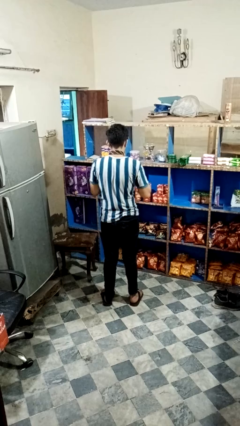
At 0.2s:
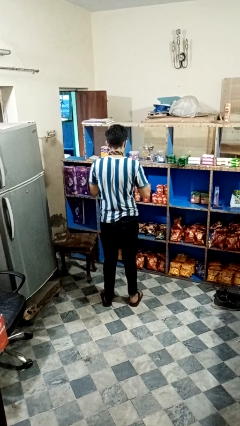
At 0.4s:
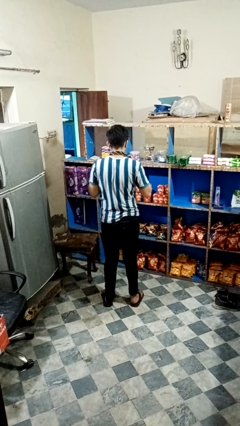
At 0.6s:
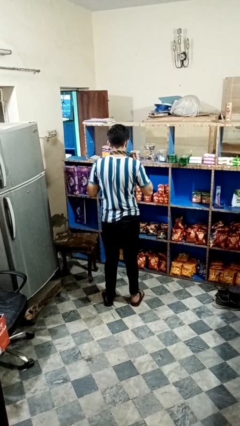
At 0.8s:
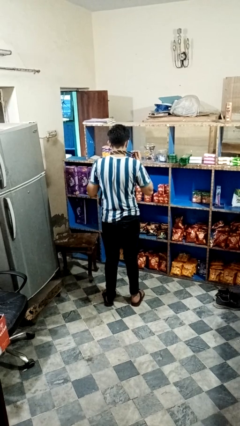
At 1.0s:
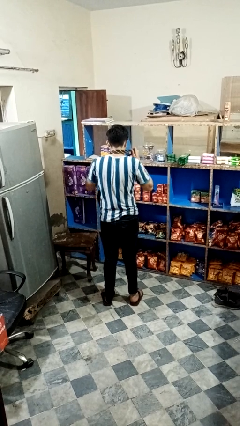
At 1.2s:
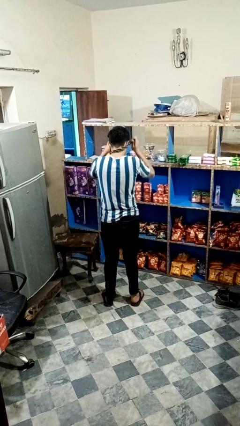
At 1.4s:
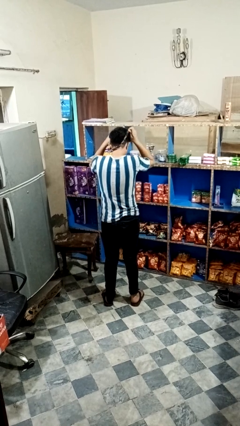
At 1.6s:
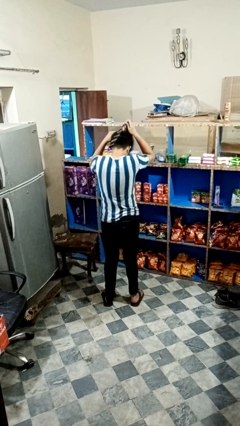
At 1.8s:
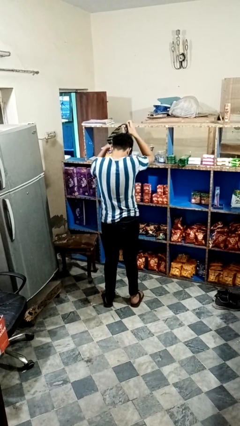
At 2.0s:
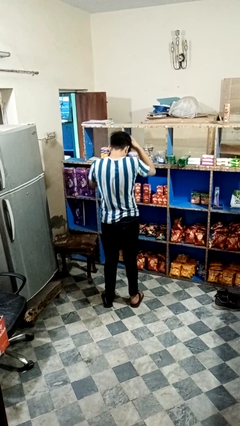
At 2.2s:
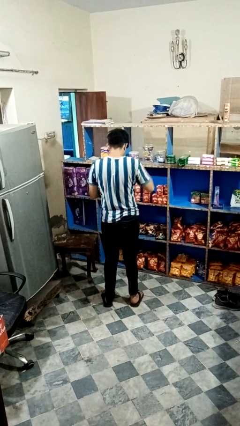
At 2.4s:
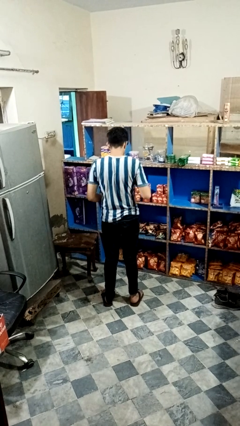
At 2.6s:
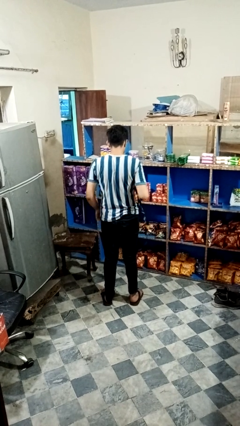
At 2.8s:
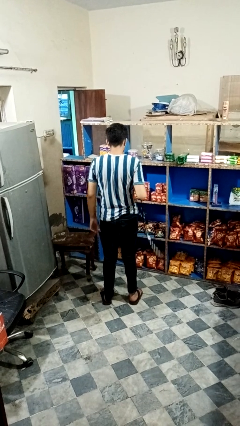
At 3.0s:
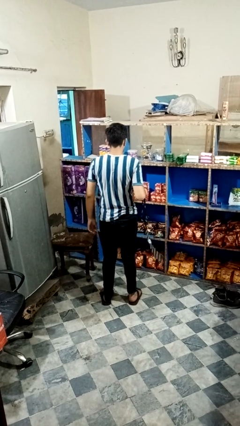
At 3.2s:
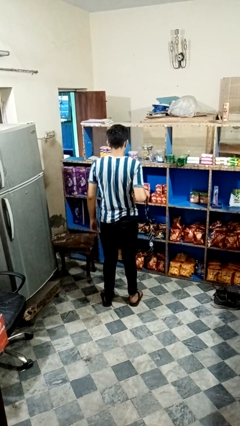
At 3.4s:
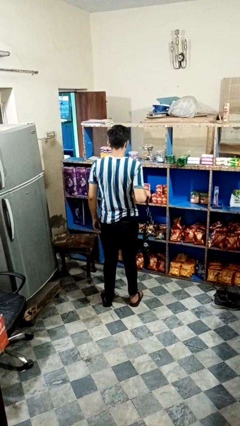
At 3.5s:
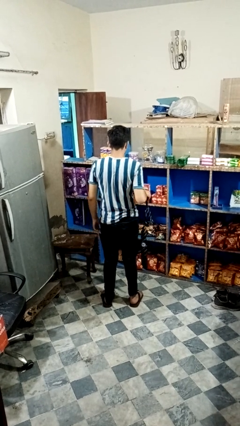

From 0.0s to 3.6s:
person takes off necktie

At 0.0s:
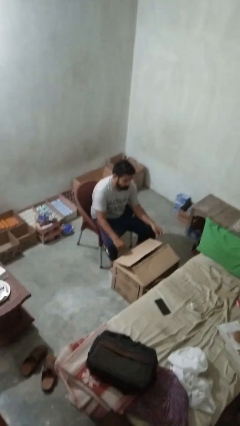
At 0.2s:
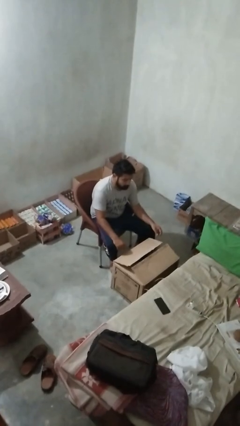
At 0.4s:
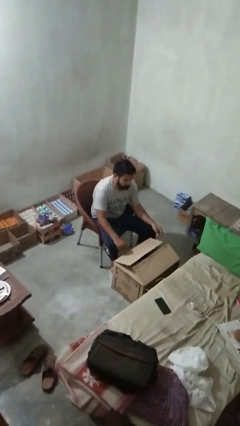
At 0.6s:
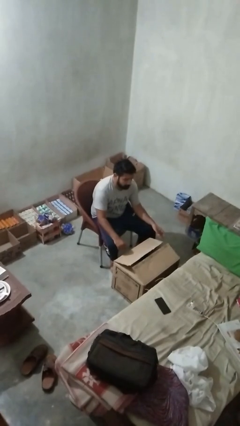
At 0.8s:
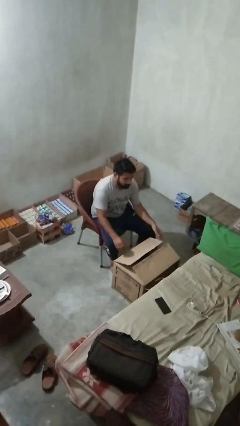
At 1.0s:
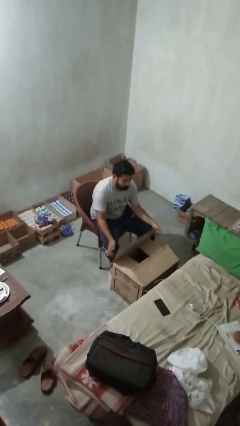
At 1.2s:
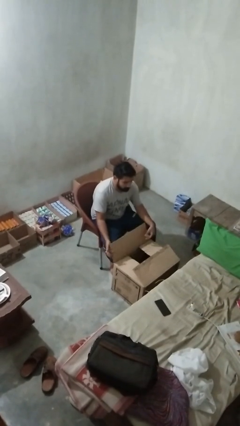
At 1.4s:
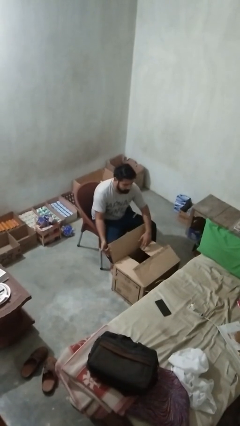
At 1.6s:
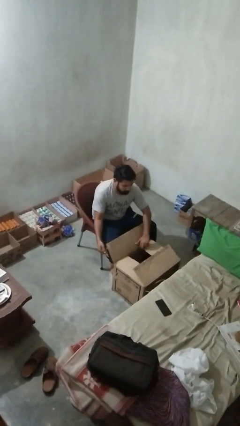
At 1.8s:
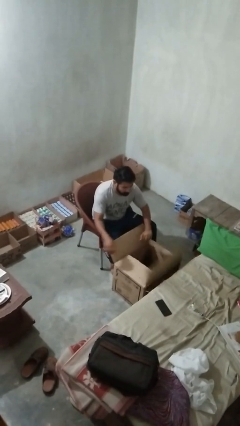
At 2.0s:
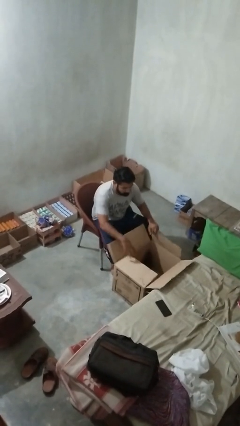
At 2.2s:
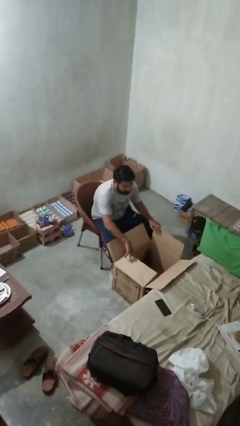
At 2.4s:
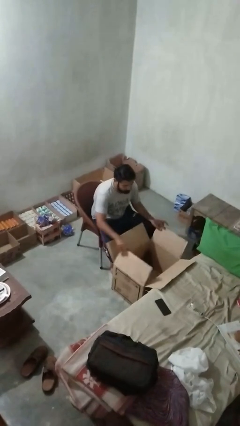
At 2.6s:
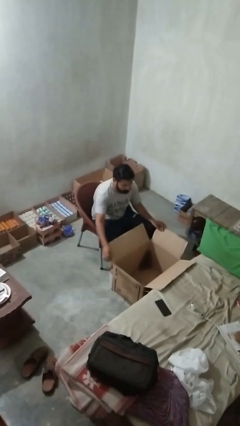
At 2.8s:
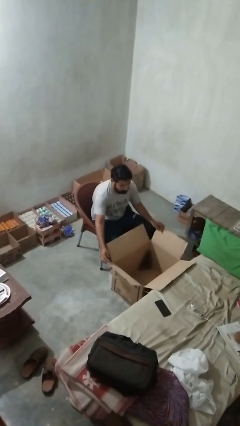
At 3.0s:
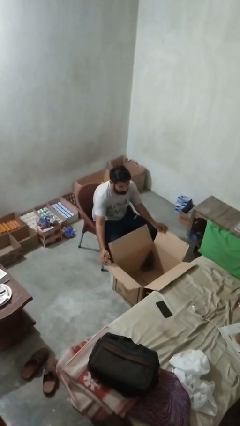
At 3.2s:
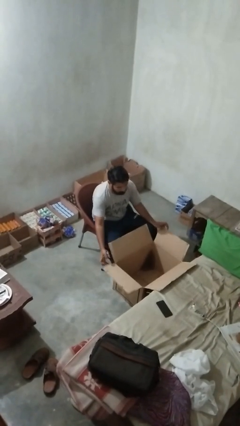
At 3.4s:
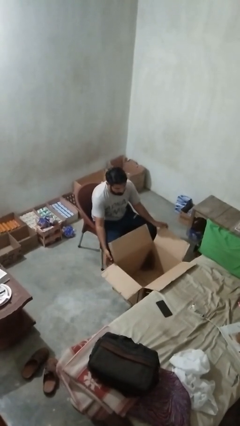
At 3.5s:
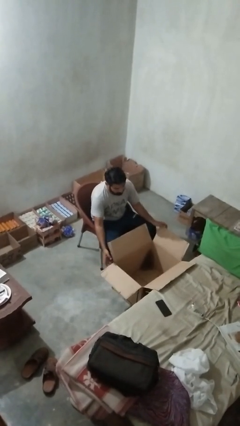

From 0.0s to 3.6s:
person opens box

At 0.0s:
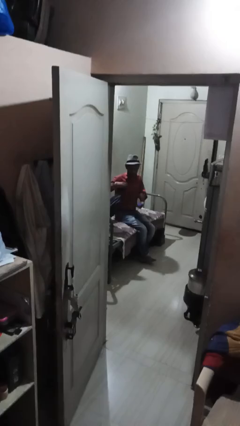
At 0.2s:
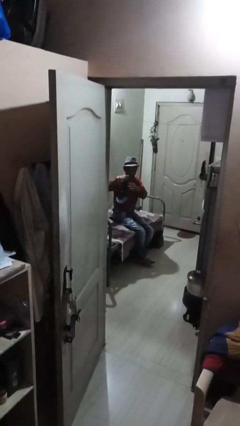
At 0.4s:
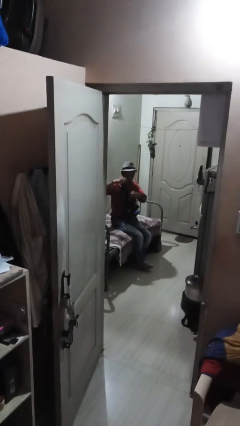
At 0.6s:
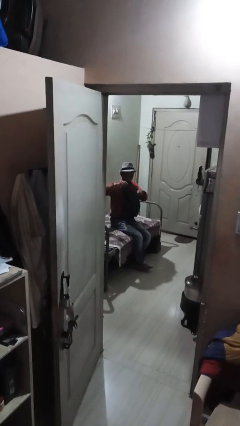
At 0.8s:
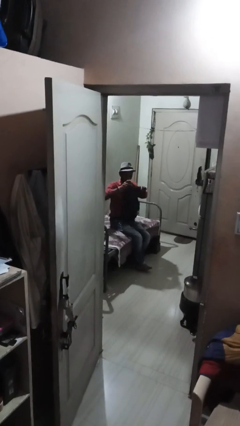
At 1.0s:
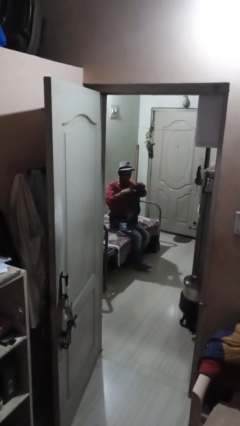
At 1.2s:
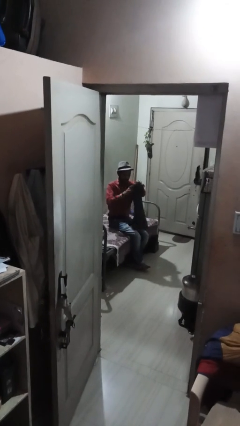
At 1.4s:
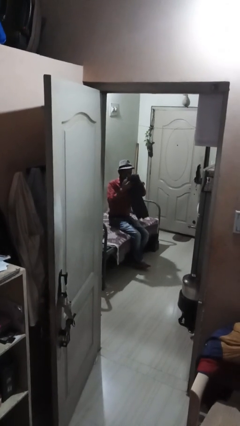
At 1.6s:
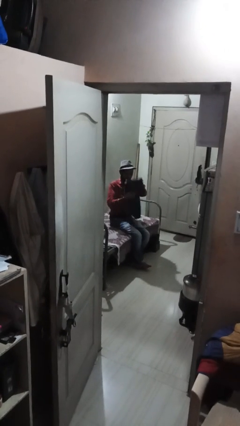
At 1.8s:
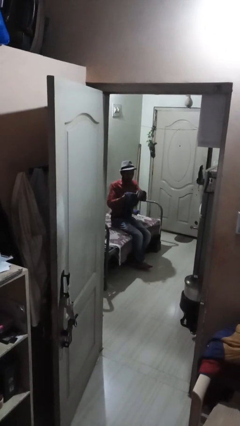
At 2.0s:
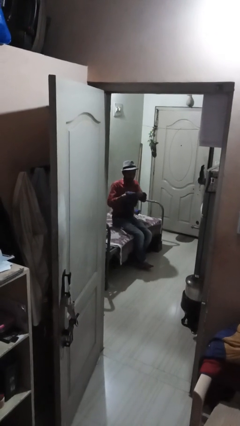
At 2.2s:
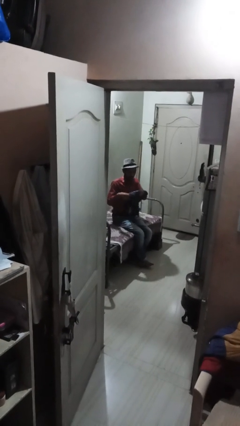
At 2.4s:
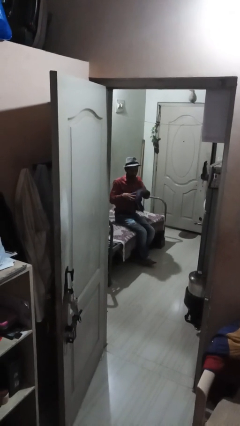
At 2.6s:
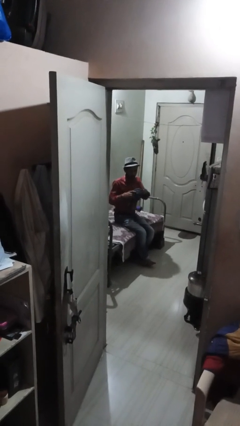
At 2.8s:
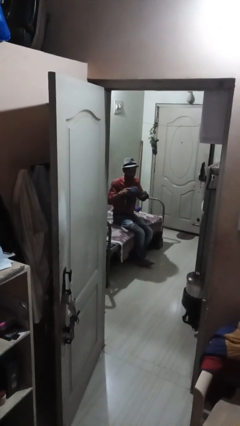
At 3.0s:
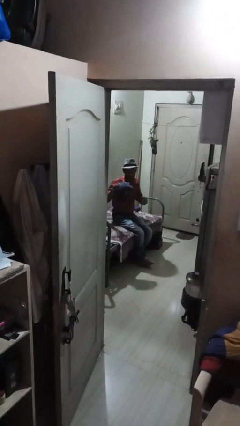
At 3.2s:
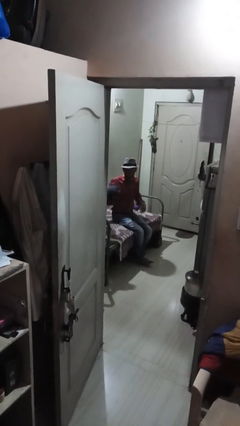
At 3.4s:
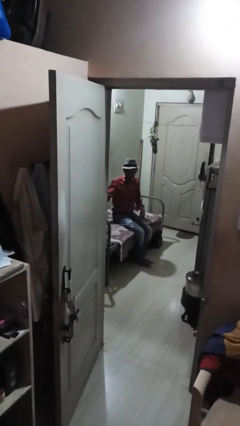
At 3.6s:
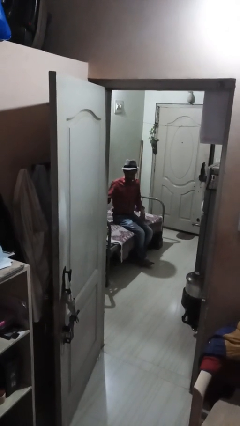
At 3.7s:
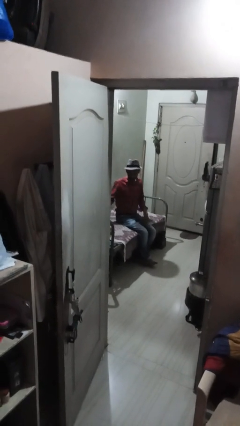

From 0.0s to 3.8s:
person folds pants

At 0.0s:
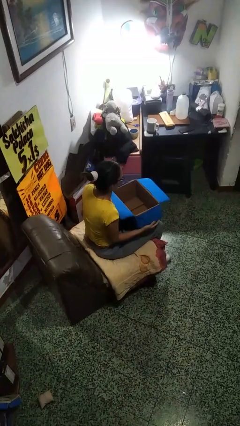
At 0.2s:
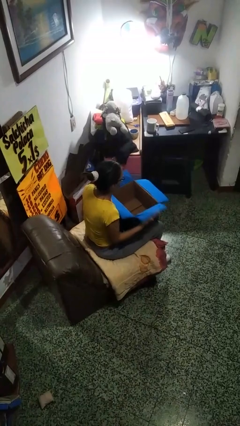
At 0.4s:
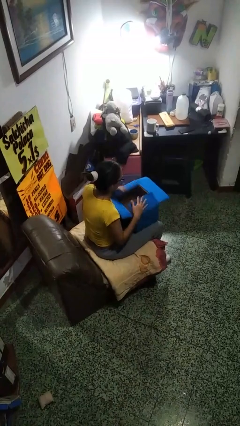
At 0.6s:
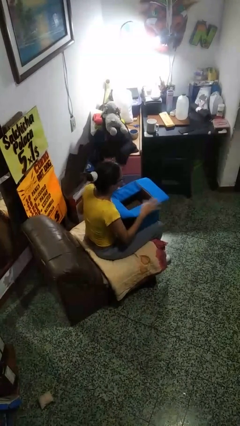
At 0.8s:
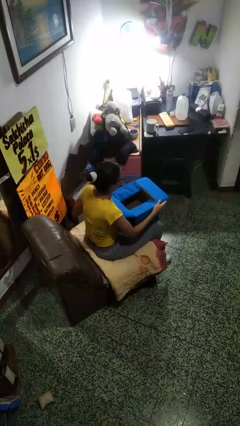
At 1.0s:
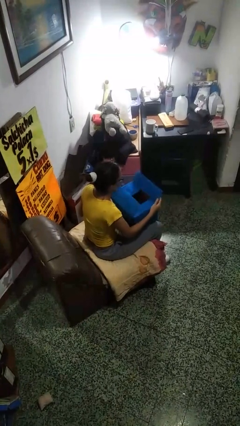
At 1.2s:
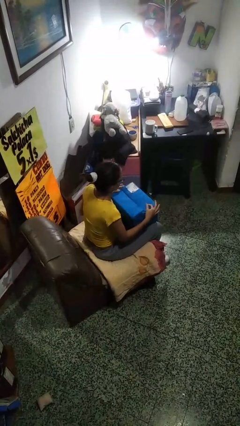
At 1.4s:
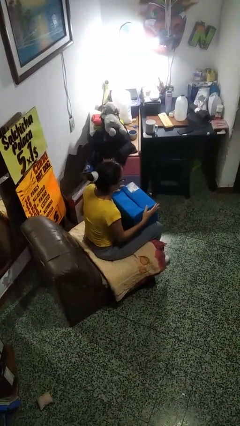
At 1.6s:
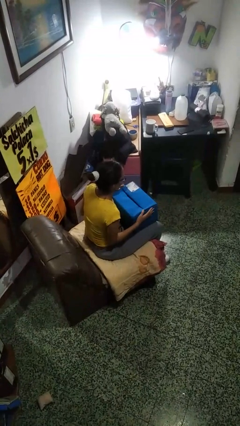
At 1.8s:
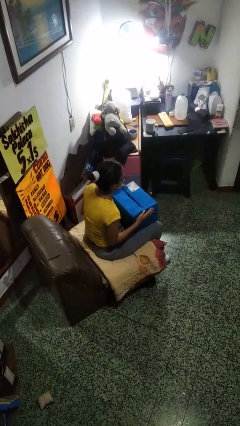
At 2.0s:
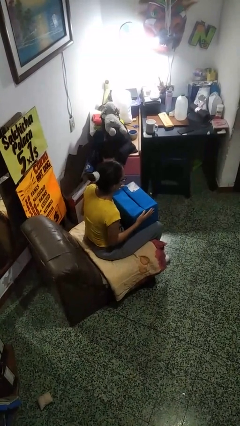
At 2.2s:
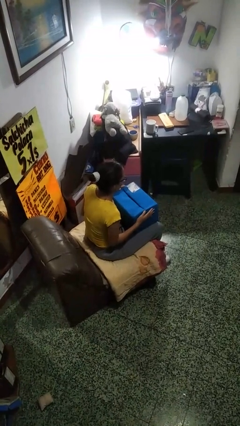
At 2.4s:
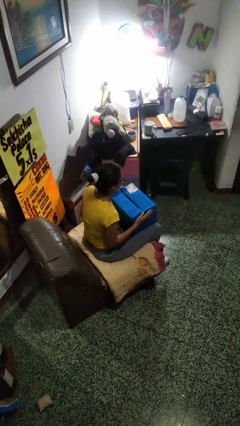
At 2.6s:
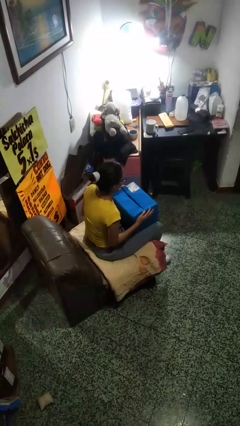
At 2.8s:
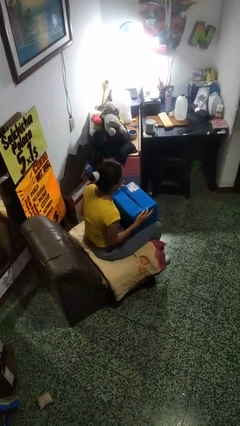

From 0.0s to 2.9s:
person closes box

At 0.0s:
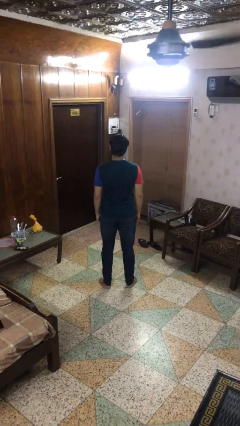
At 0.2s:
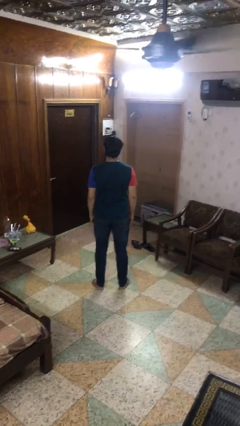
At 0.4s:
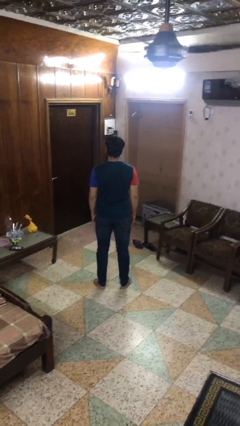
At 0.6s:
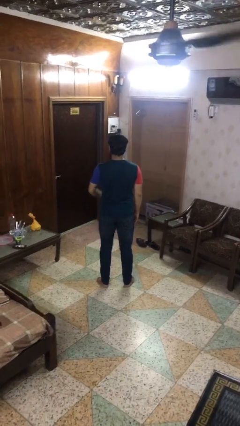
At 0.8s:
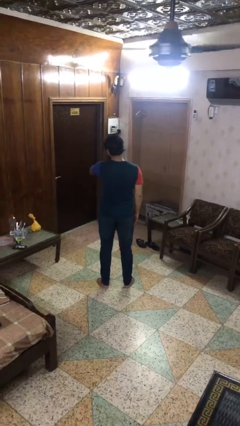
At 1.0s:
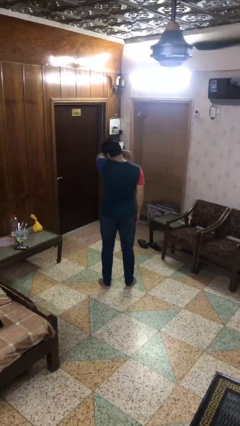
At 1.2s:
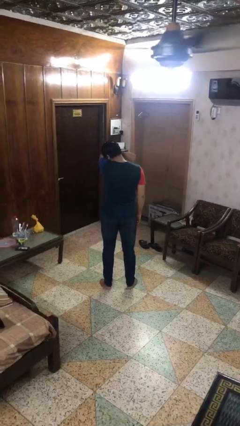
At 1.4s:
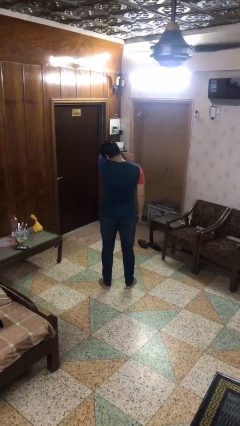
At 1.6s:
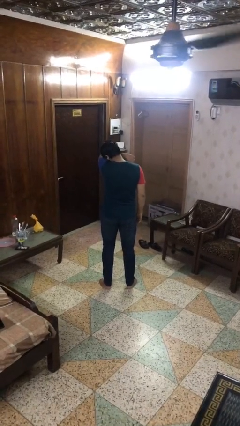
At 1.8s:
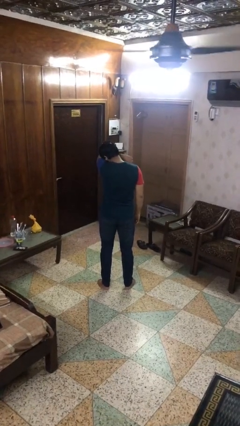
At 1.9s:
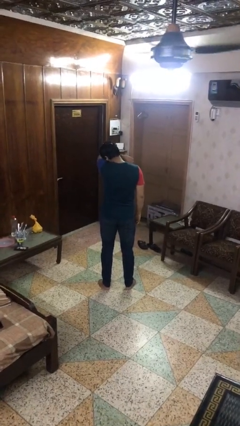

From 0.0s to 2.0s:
person sneezes into arm

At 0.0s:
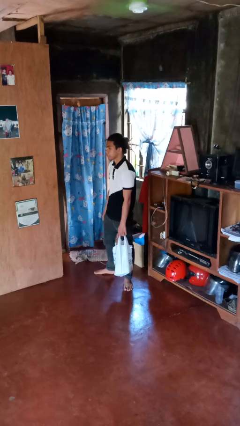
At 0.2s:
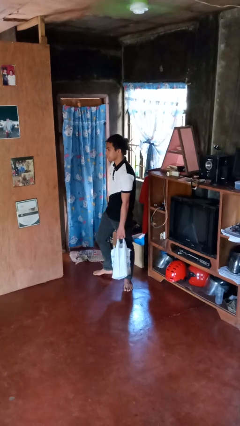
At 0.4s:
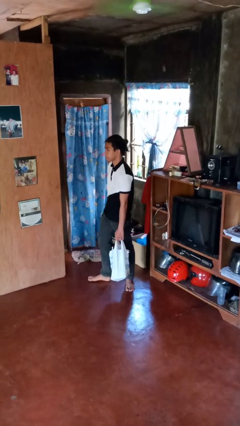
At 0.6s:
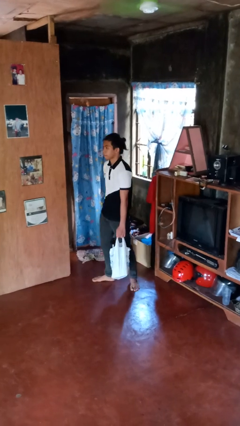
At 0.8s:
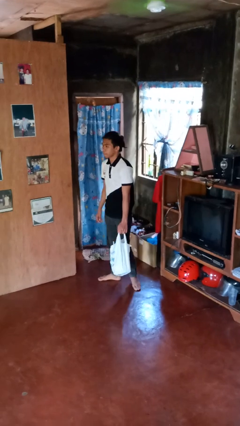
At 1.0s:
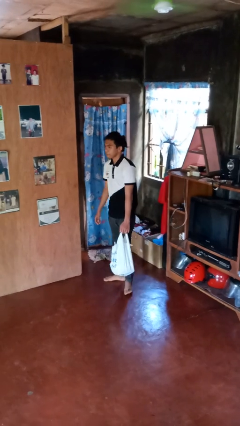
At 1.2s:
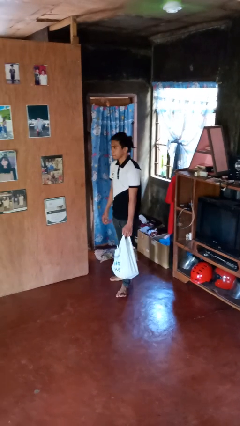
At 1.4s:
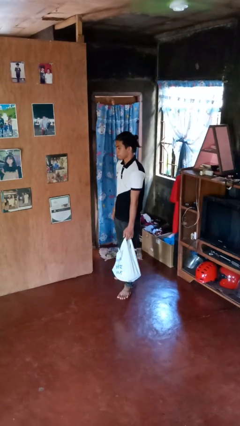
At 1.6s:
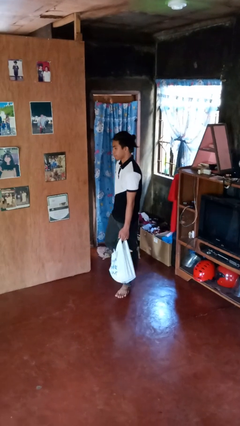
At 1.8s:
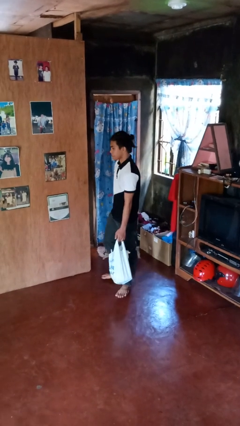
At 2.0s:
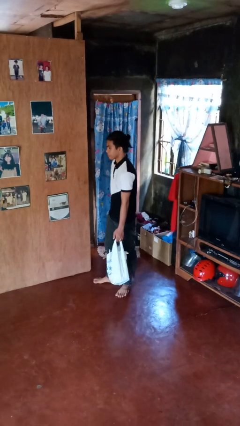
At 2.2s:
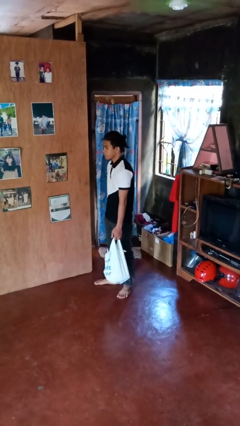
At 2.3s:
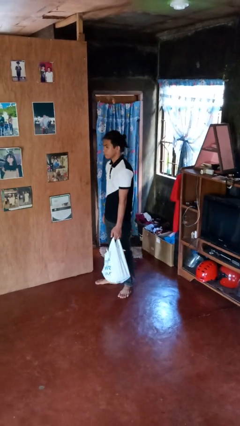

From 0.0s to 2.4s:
person carries groceries
